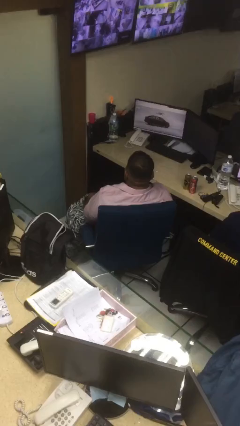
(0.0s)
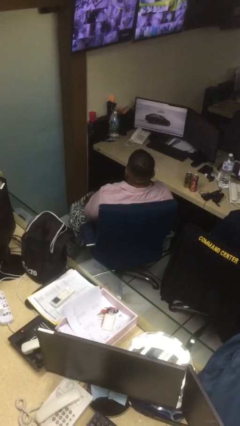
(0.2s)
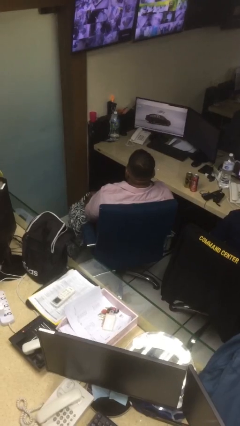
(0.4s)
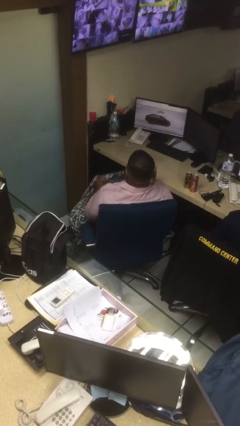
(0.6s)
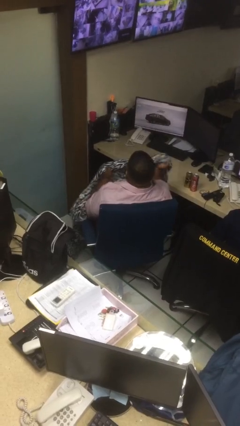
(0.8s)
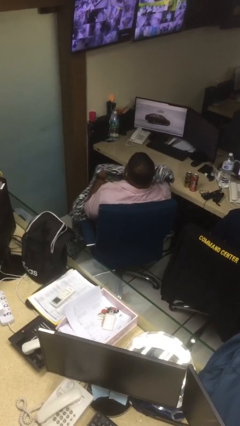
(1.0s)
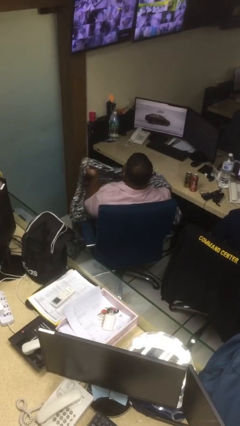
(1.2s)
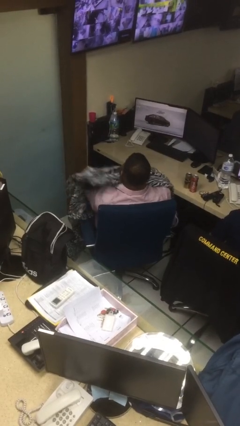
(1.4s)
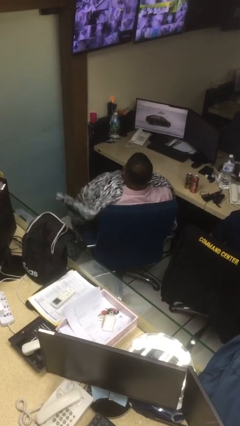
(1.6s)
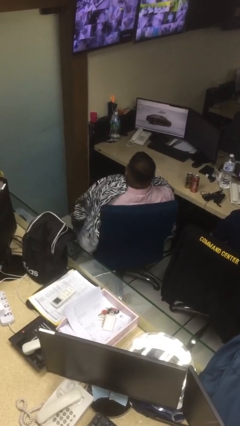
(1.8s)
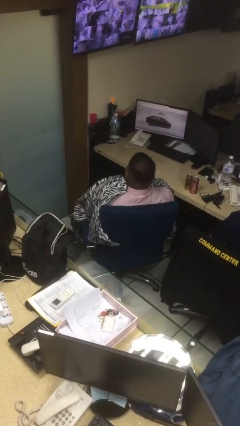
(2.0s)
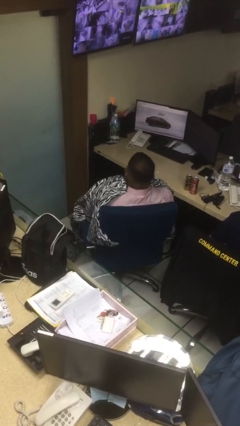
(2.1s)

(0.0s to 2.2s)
person covers with blanket

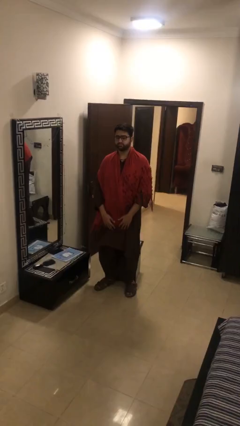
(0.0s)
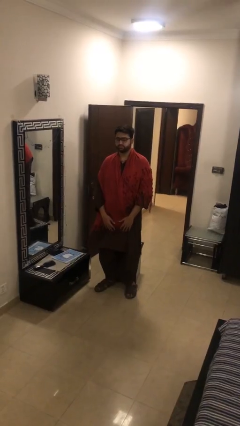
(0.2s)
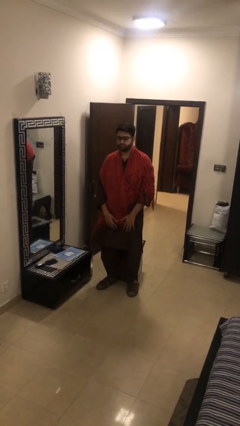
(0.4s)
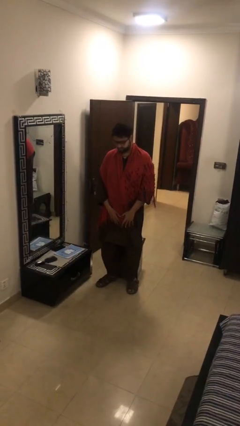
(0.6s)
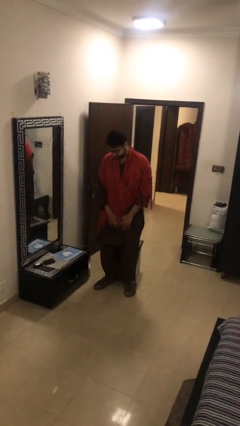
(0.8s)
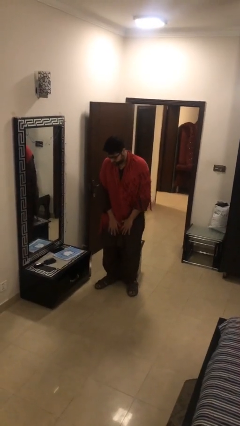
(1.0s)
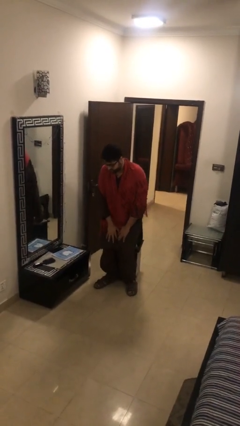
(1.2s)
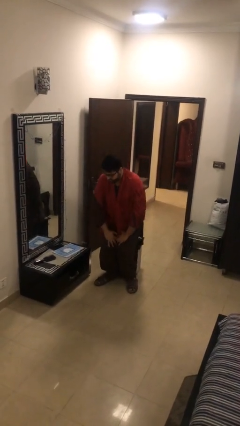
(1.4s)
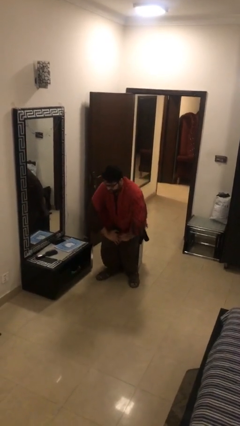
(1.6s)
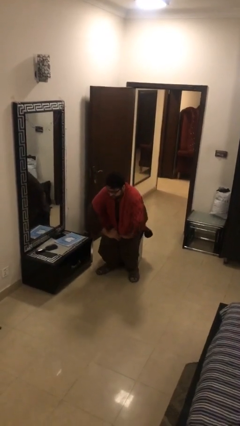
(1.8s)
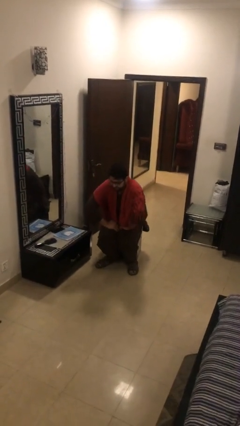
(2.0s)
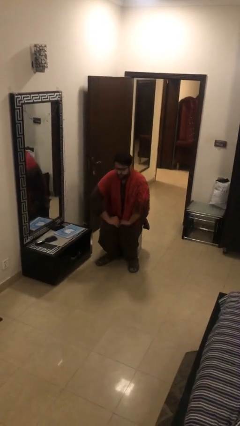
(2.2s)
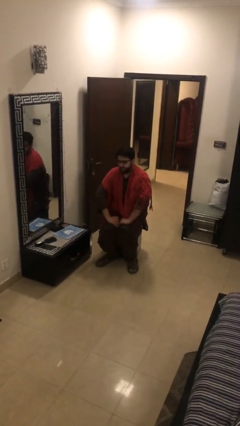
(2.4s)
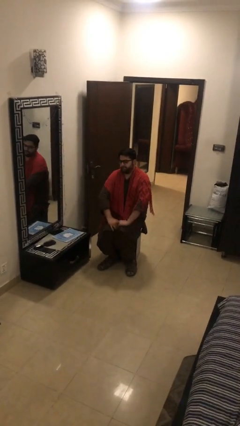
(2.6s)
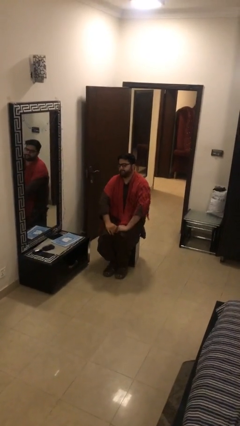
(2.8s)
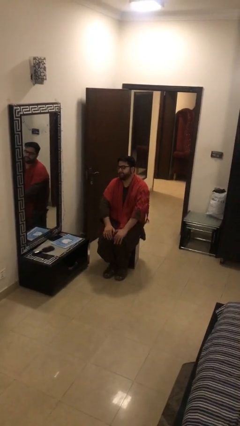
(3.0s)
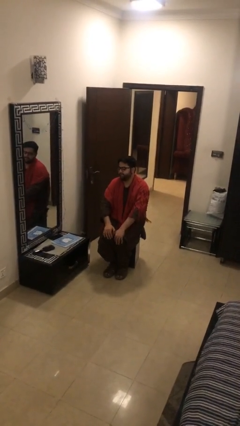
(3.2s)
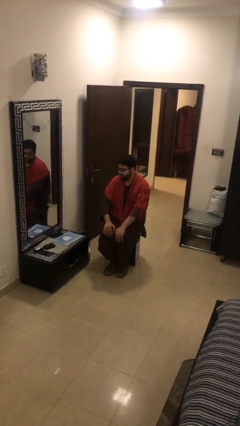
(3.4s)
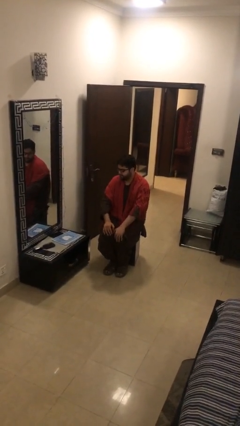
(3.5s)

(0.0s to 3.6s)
person sits down

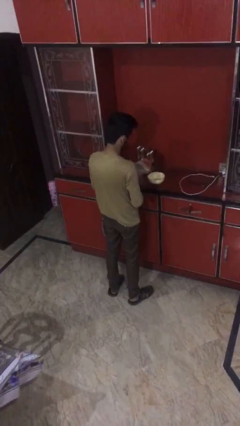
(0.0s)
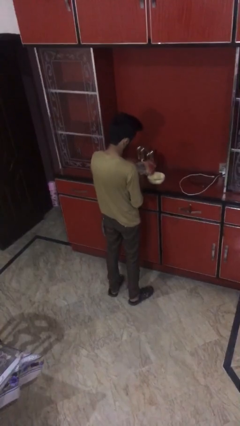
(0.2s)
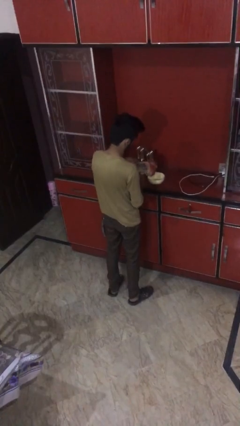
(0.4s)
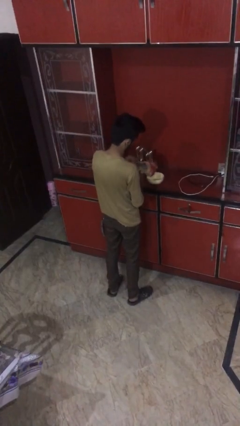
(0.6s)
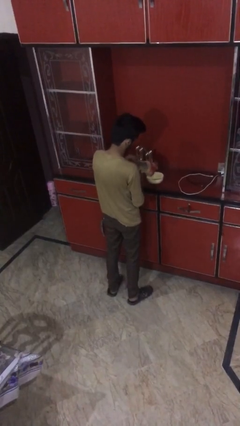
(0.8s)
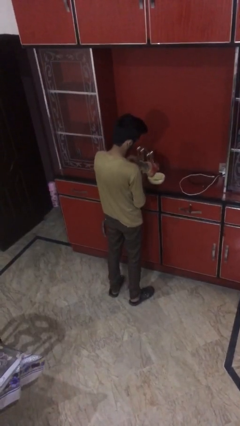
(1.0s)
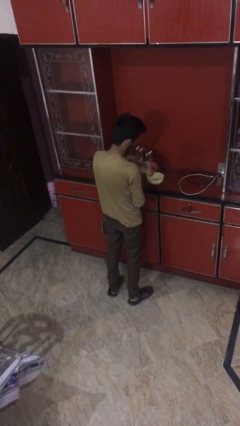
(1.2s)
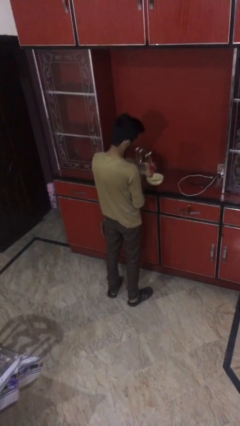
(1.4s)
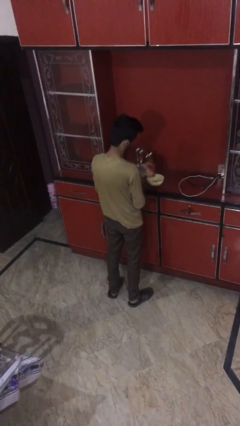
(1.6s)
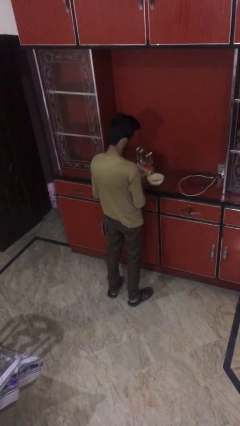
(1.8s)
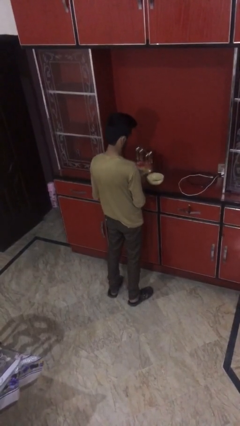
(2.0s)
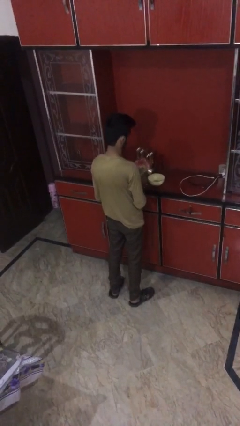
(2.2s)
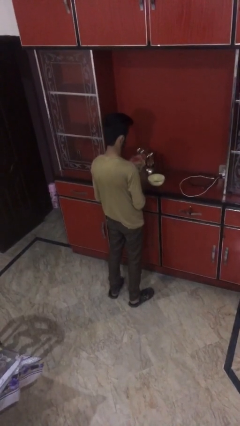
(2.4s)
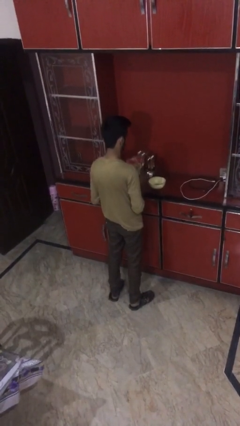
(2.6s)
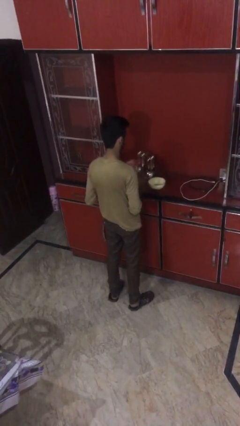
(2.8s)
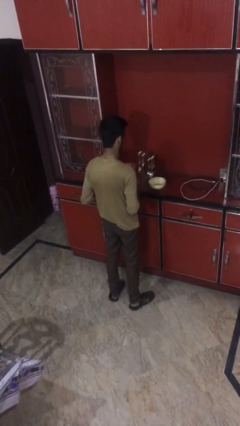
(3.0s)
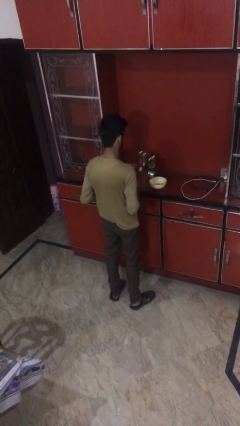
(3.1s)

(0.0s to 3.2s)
person pours into bowl

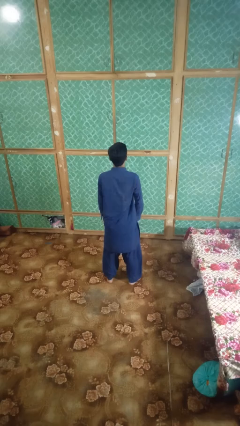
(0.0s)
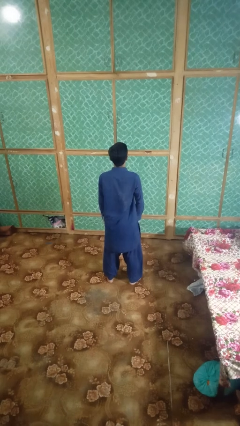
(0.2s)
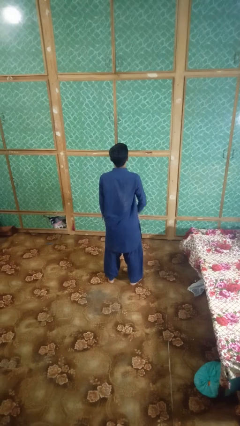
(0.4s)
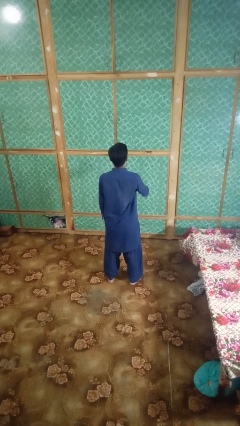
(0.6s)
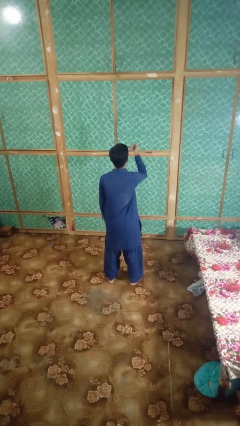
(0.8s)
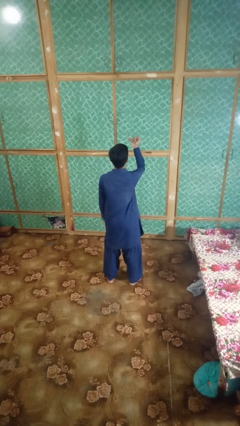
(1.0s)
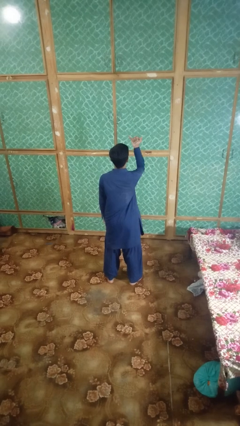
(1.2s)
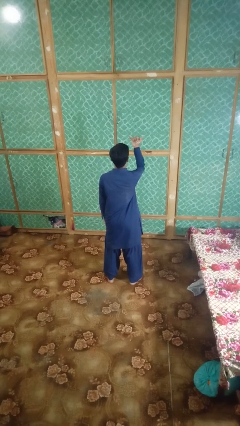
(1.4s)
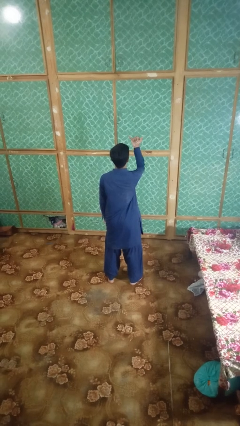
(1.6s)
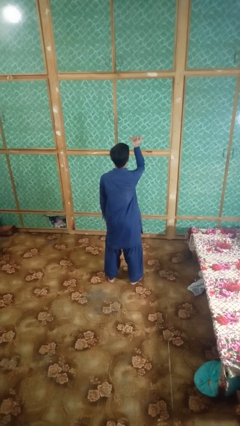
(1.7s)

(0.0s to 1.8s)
person gestures hang loose

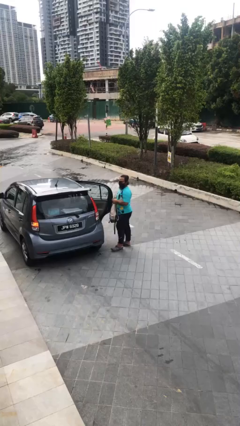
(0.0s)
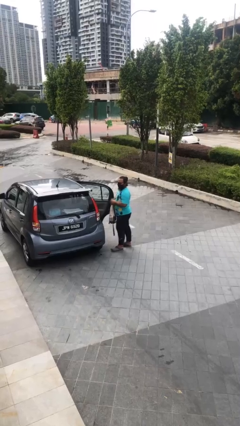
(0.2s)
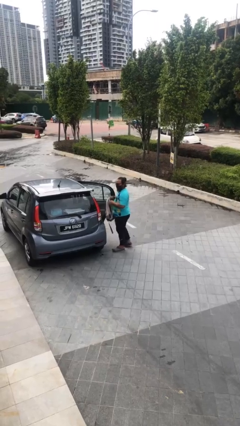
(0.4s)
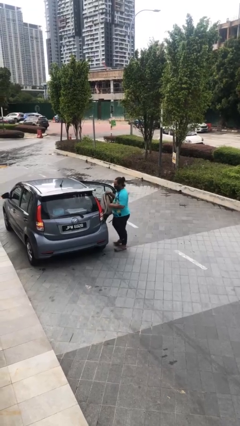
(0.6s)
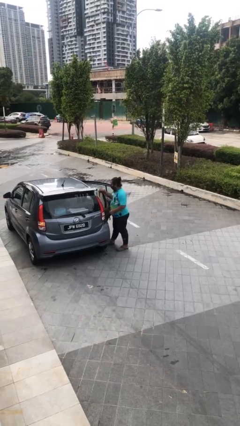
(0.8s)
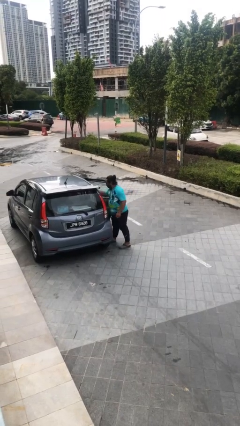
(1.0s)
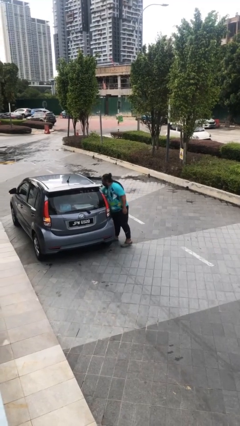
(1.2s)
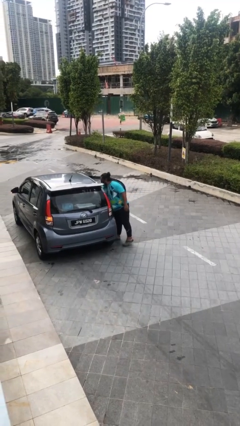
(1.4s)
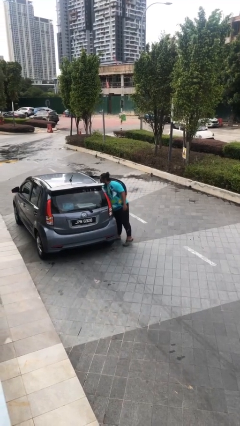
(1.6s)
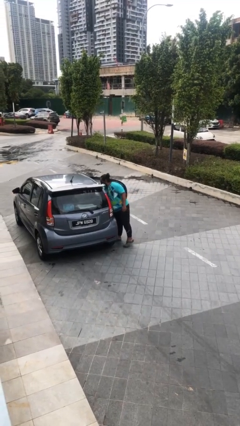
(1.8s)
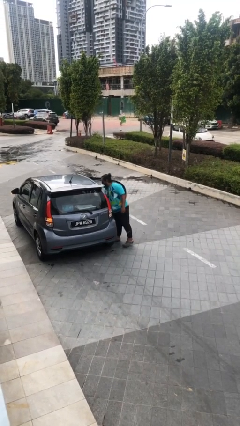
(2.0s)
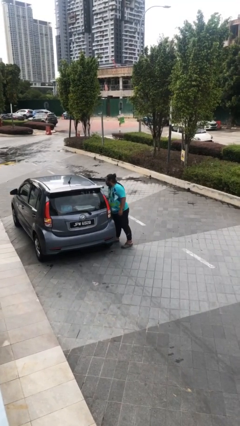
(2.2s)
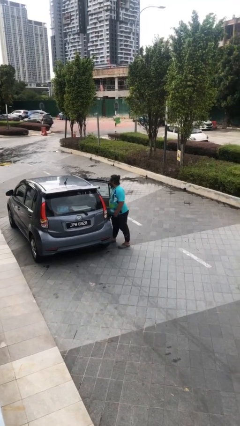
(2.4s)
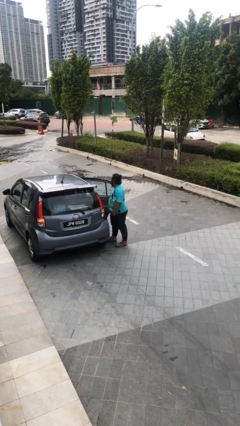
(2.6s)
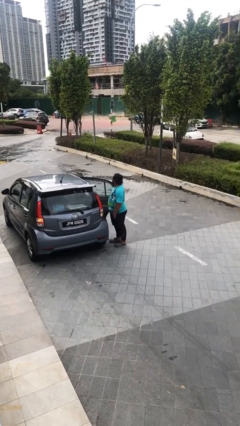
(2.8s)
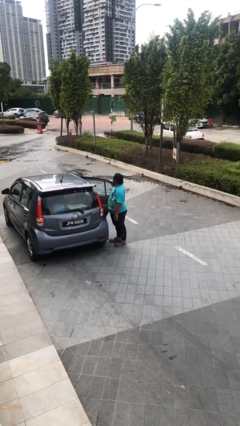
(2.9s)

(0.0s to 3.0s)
person loads car

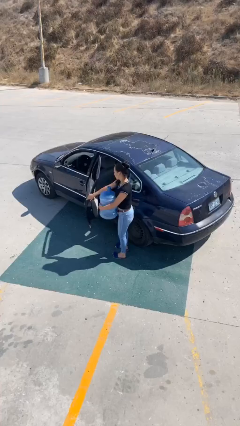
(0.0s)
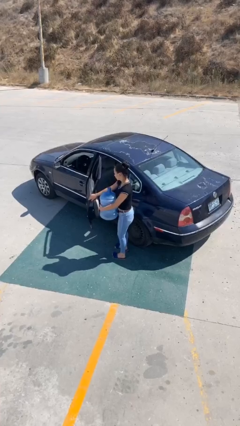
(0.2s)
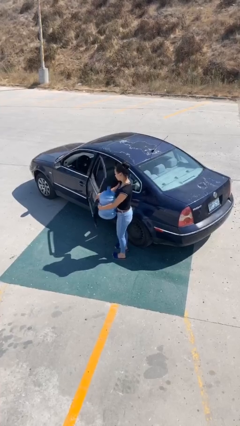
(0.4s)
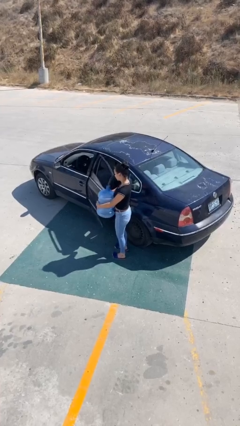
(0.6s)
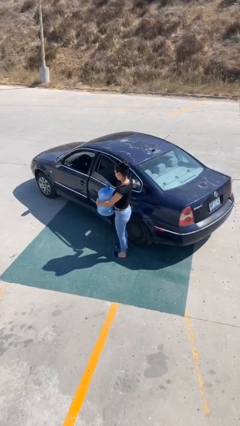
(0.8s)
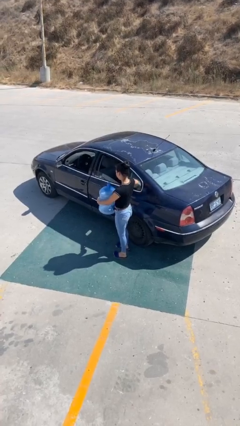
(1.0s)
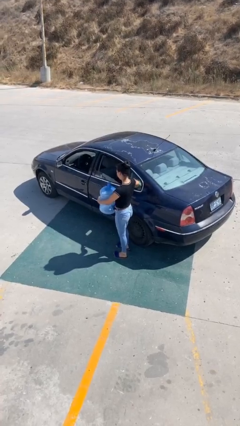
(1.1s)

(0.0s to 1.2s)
person closes car door

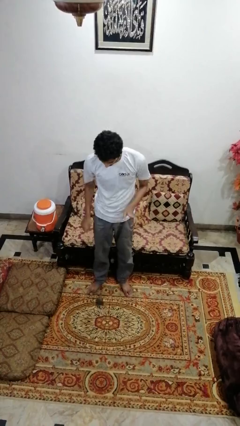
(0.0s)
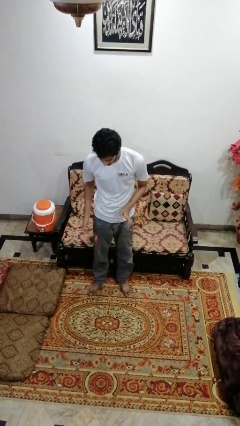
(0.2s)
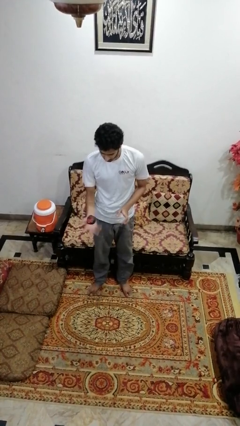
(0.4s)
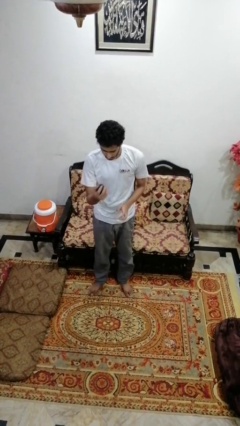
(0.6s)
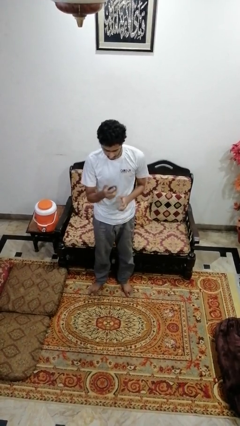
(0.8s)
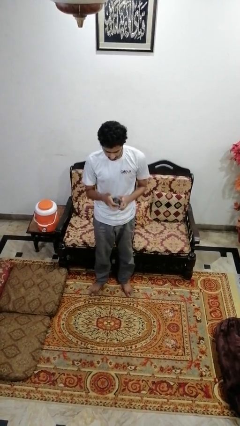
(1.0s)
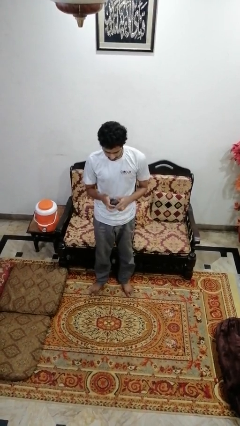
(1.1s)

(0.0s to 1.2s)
person bounces ball on floor

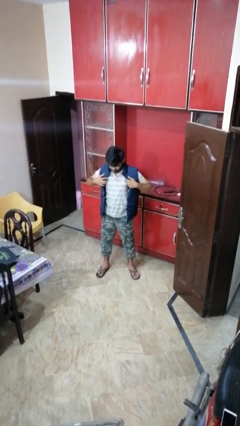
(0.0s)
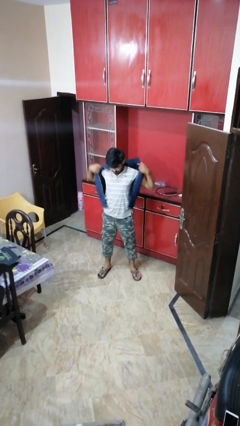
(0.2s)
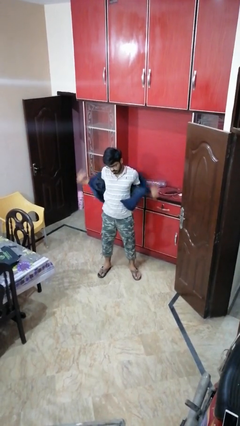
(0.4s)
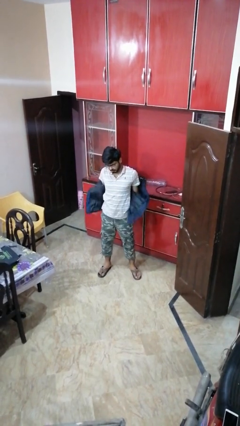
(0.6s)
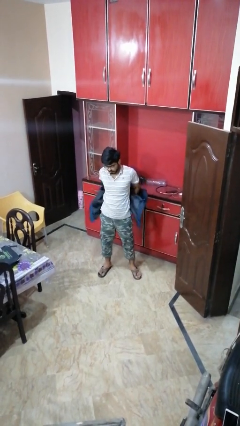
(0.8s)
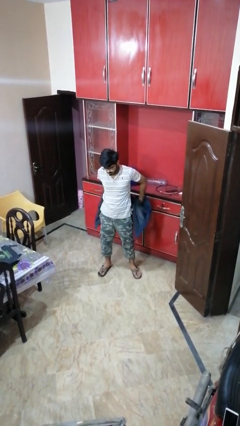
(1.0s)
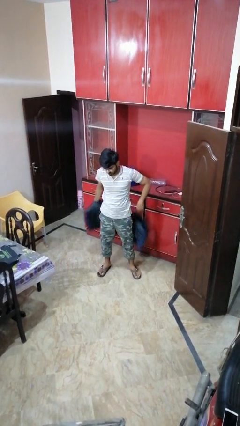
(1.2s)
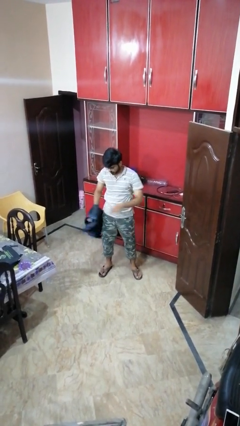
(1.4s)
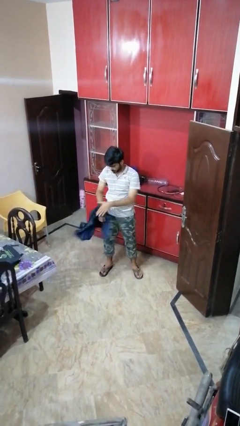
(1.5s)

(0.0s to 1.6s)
person takes off jacket
